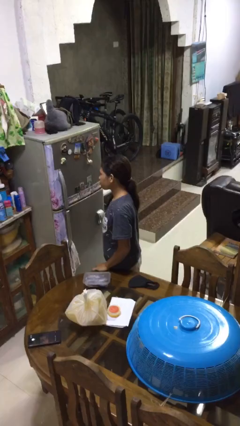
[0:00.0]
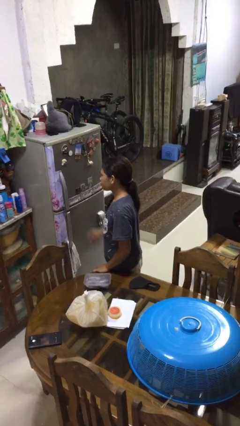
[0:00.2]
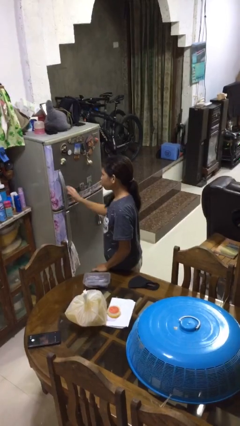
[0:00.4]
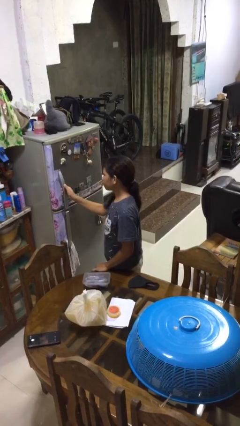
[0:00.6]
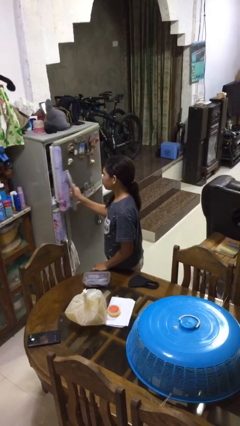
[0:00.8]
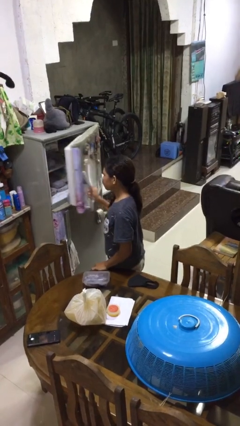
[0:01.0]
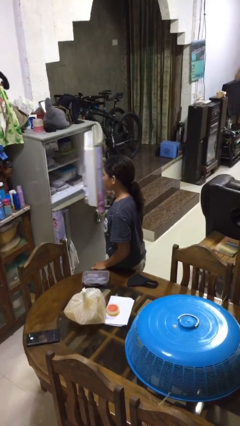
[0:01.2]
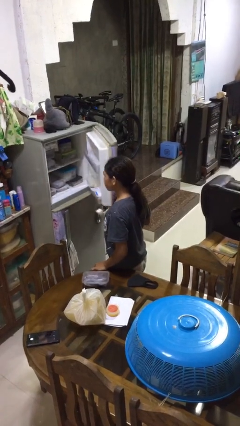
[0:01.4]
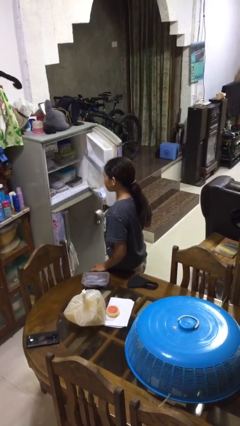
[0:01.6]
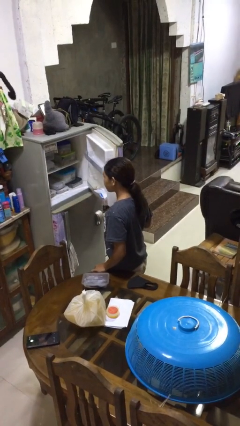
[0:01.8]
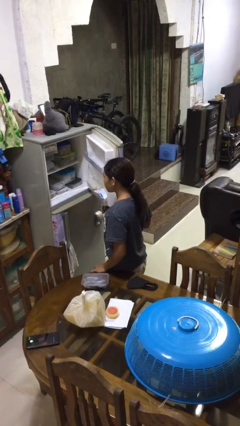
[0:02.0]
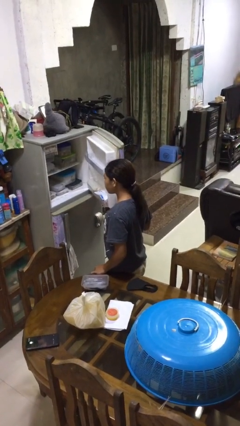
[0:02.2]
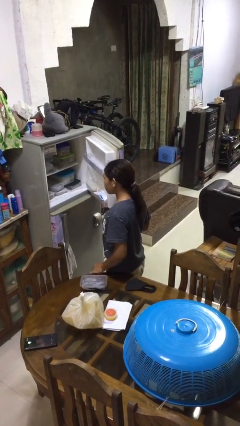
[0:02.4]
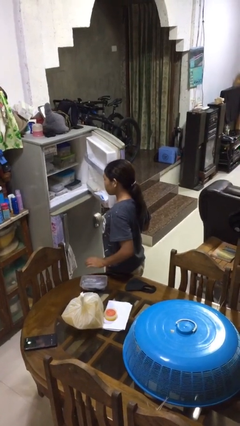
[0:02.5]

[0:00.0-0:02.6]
person opens refrigerator

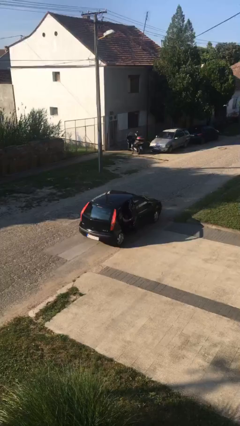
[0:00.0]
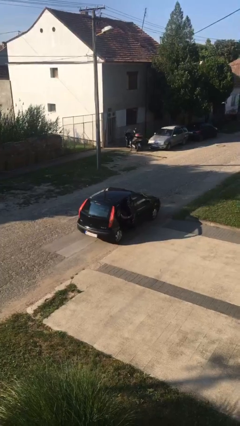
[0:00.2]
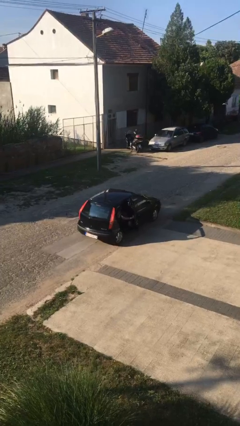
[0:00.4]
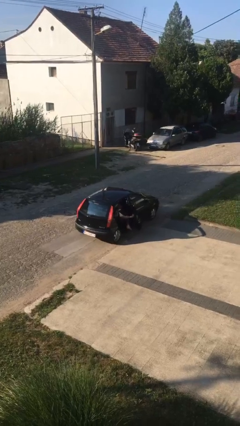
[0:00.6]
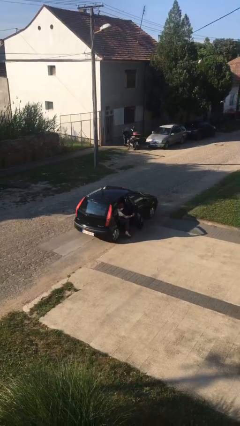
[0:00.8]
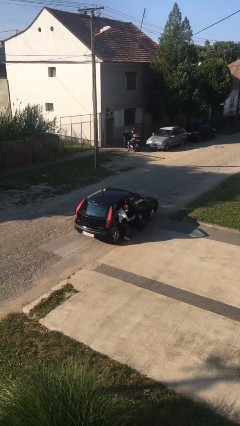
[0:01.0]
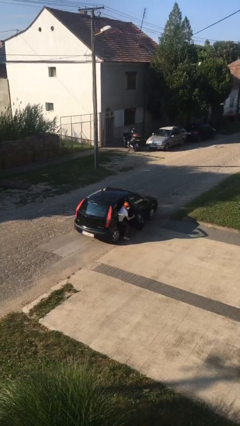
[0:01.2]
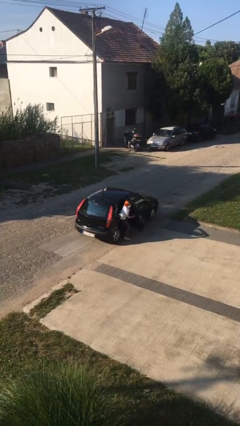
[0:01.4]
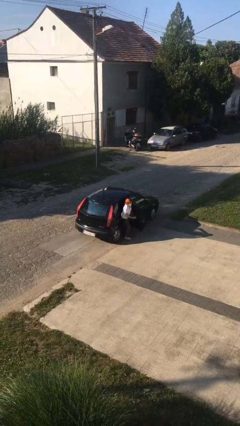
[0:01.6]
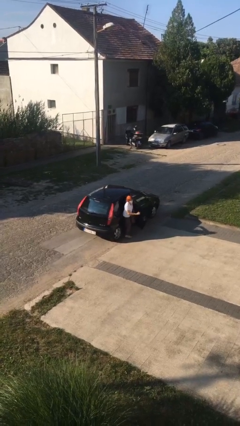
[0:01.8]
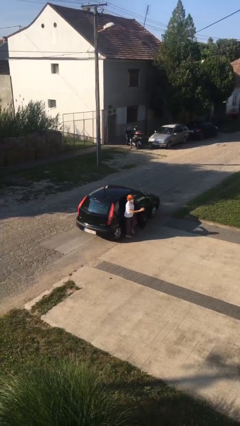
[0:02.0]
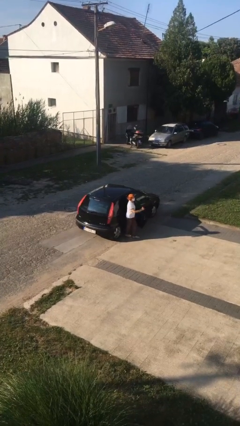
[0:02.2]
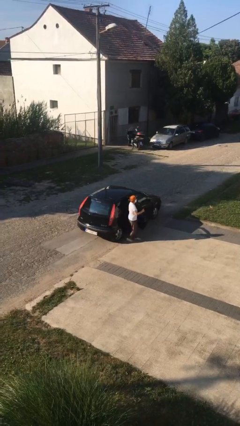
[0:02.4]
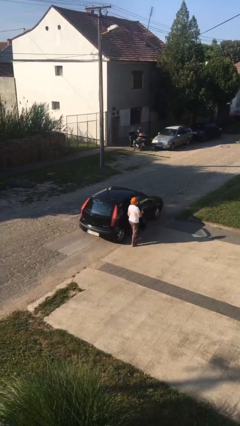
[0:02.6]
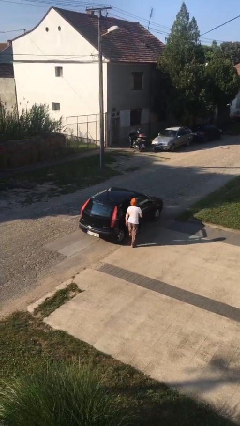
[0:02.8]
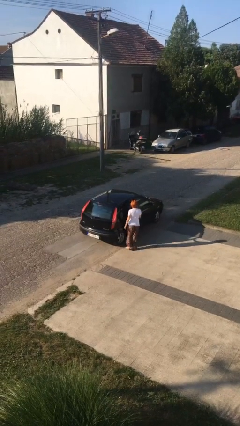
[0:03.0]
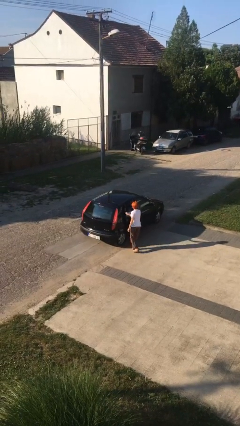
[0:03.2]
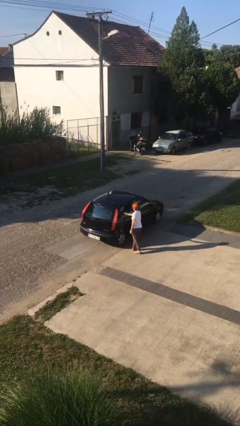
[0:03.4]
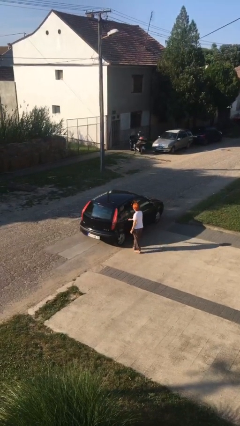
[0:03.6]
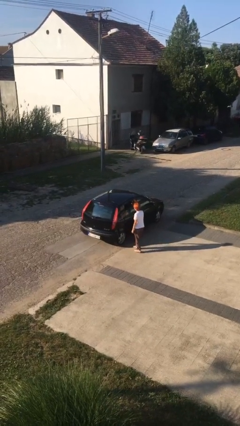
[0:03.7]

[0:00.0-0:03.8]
car drops off person

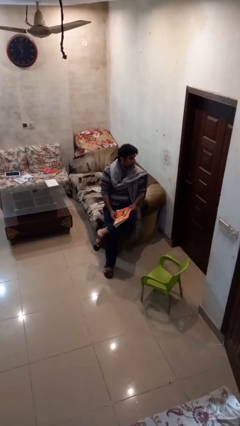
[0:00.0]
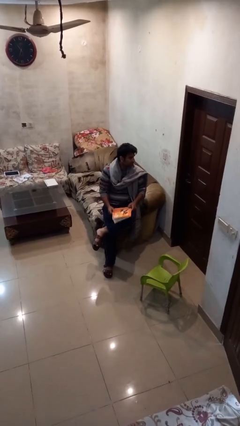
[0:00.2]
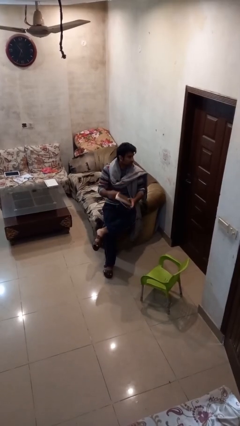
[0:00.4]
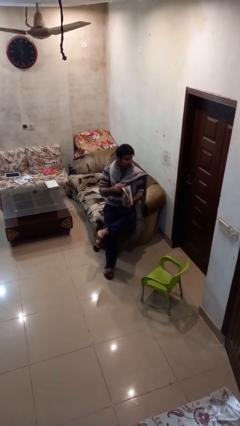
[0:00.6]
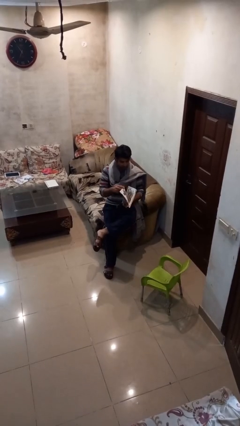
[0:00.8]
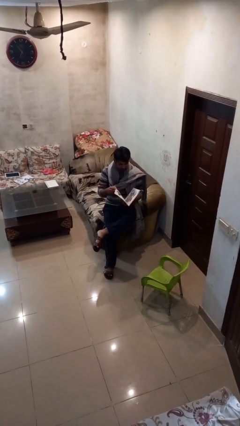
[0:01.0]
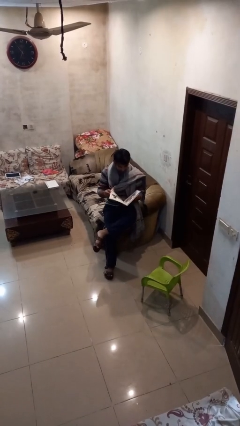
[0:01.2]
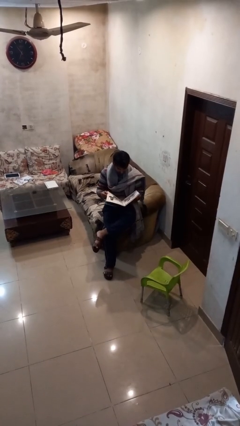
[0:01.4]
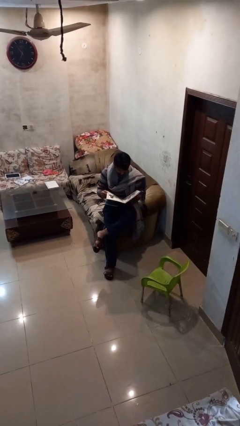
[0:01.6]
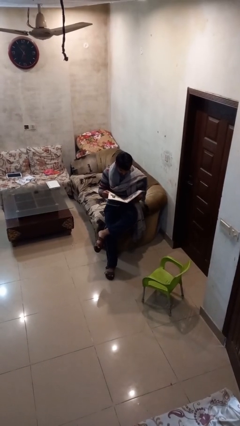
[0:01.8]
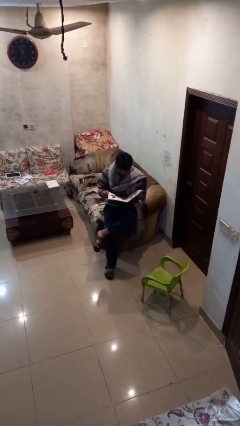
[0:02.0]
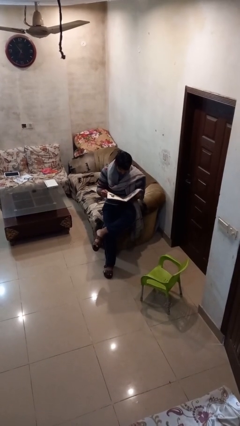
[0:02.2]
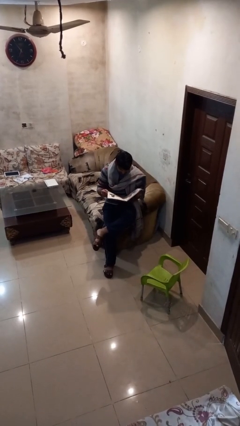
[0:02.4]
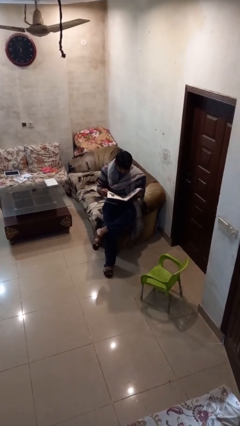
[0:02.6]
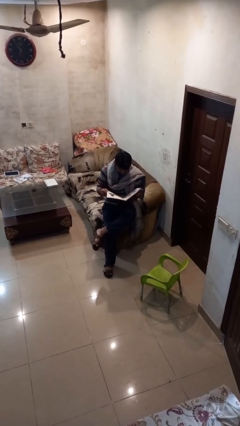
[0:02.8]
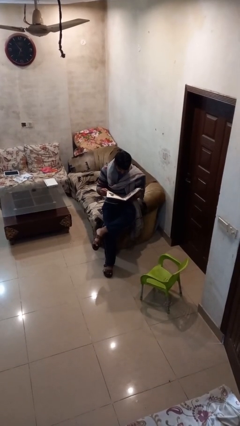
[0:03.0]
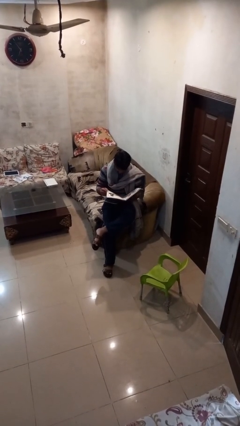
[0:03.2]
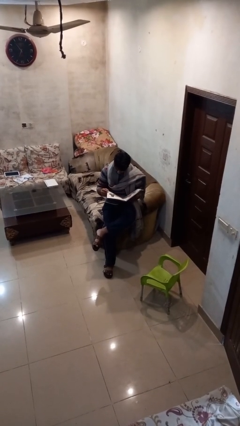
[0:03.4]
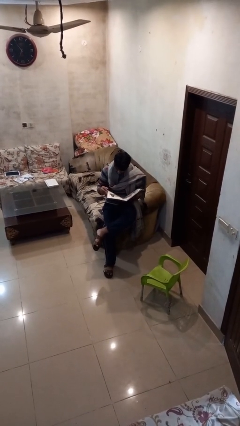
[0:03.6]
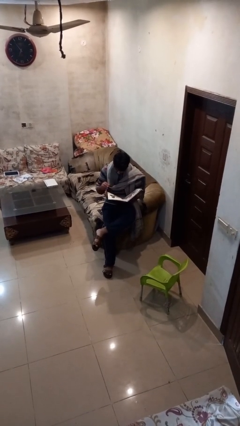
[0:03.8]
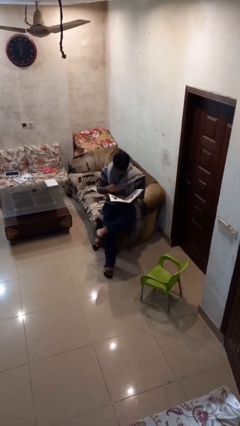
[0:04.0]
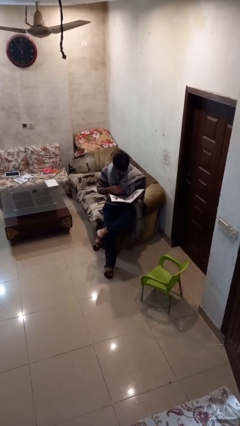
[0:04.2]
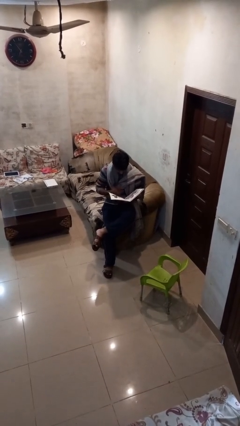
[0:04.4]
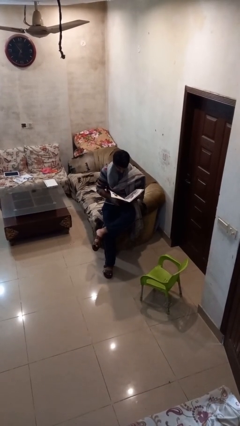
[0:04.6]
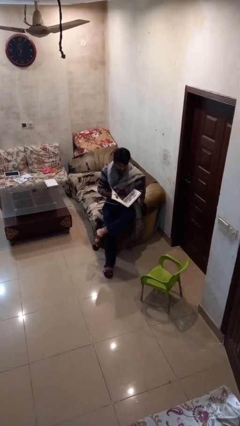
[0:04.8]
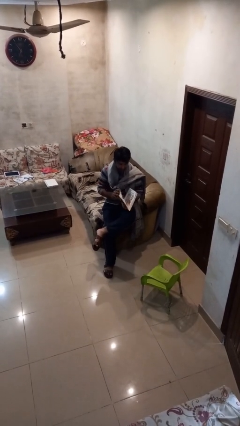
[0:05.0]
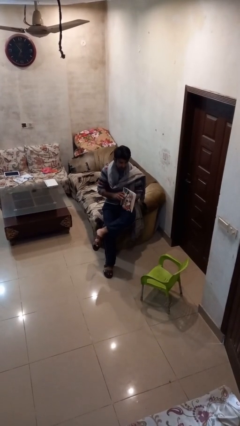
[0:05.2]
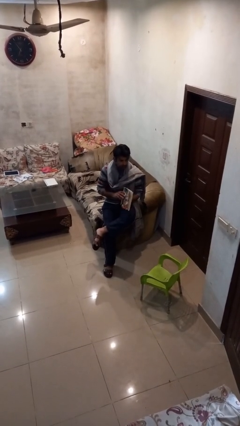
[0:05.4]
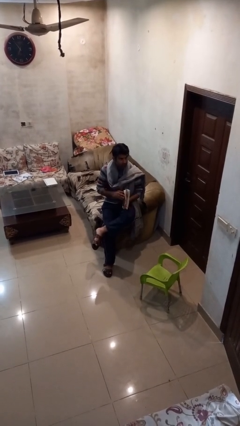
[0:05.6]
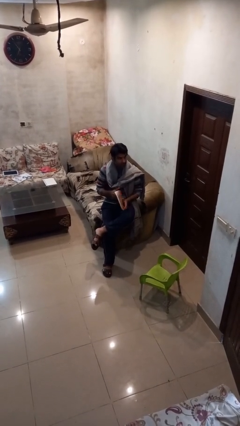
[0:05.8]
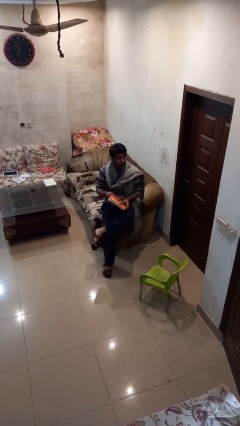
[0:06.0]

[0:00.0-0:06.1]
person reads document

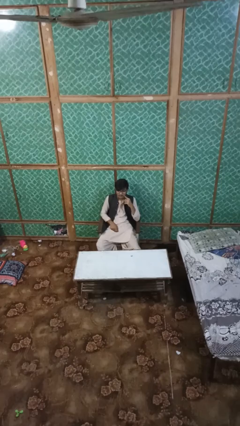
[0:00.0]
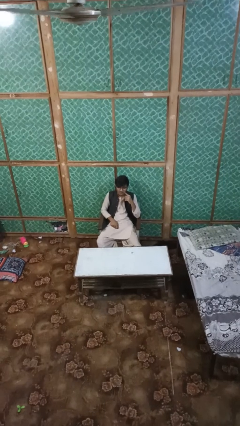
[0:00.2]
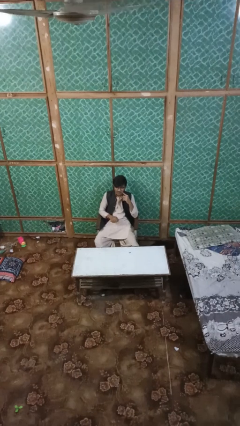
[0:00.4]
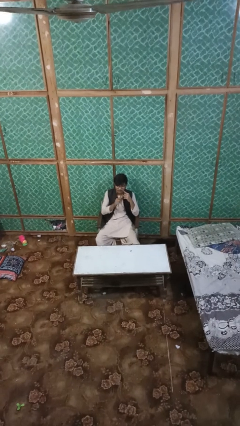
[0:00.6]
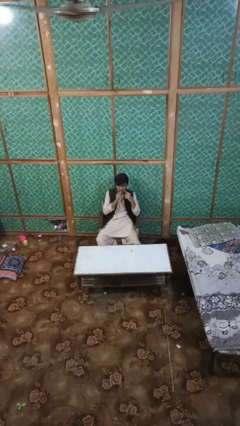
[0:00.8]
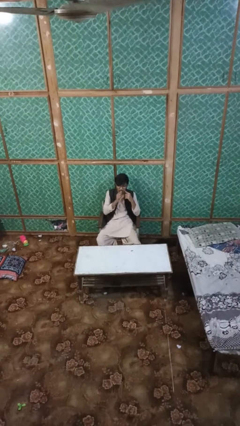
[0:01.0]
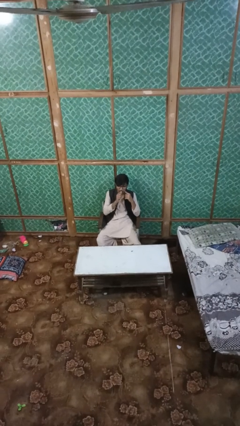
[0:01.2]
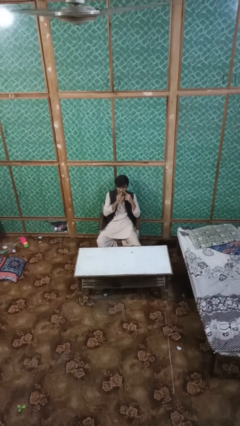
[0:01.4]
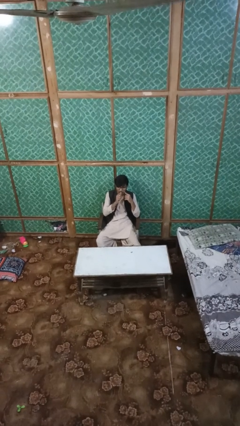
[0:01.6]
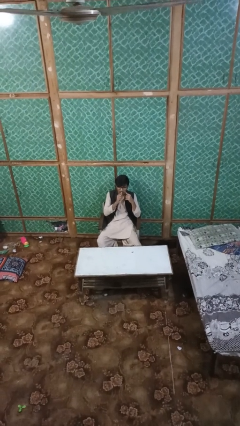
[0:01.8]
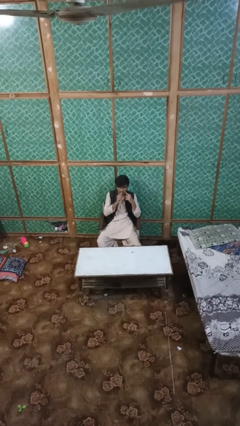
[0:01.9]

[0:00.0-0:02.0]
person vapes

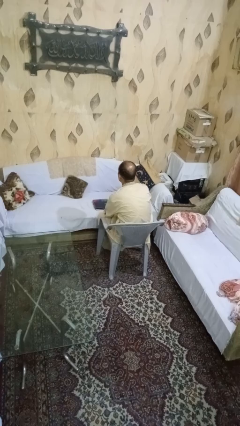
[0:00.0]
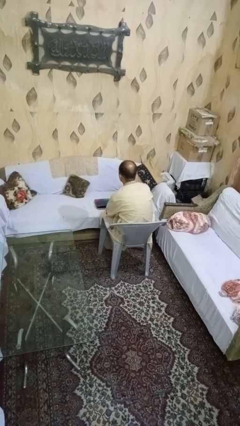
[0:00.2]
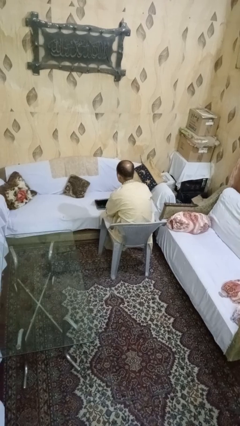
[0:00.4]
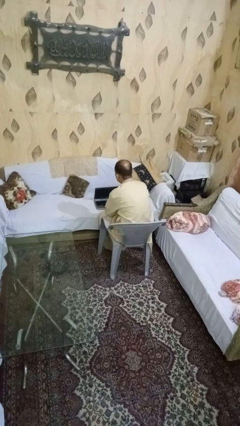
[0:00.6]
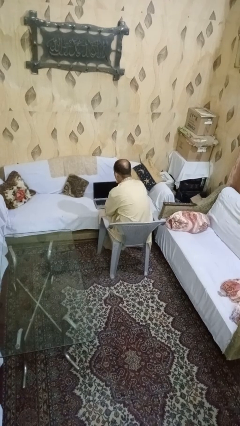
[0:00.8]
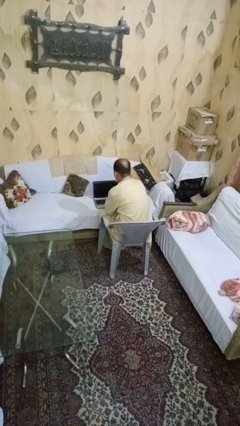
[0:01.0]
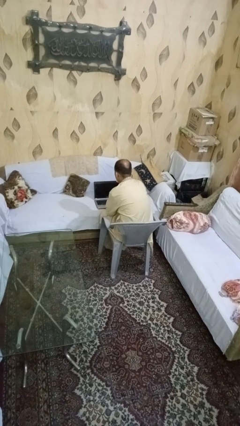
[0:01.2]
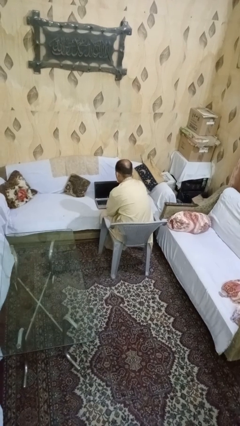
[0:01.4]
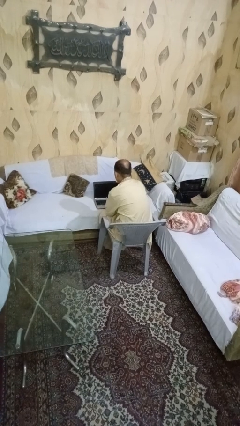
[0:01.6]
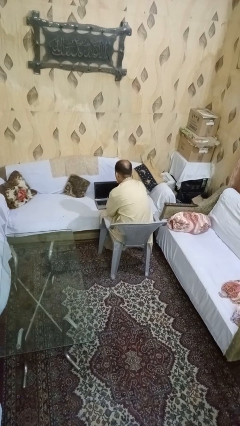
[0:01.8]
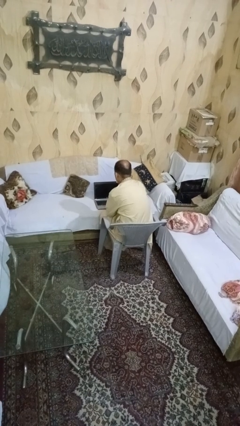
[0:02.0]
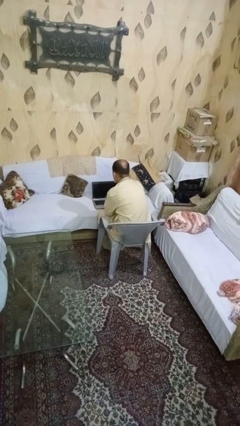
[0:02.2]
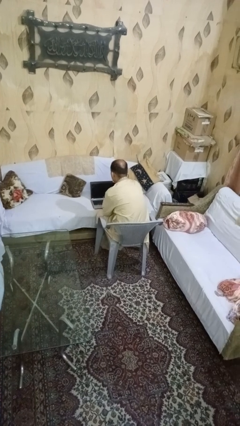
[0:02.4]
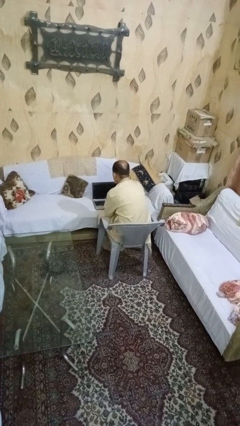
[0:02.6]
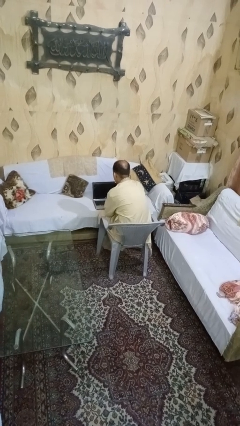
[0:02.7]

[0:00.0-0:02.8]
person opens laptop

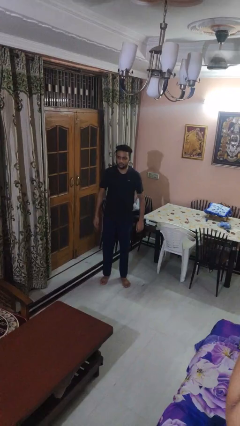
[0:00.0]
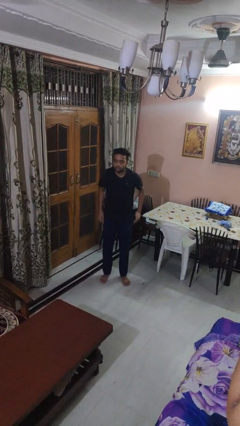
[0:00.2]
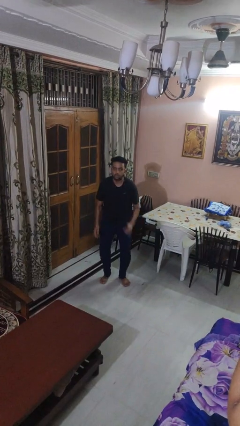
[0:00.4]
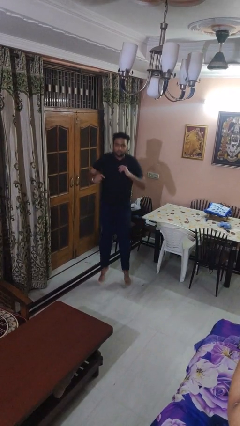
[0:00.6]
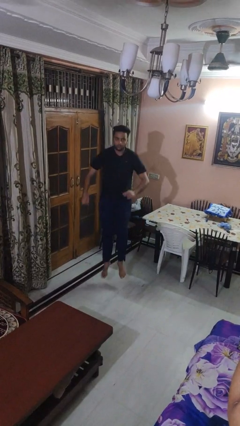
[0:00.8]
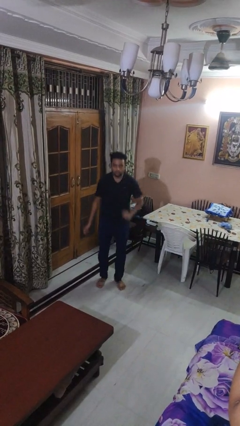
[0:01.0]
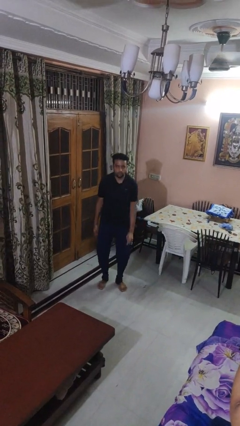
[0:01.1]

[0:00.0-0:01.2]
person jumps
